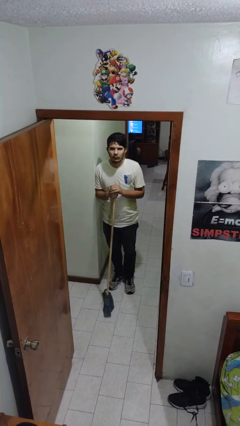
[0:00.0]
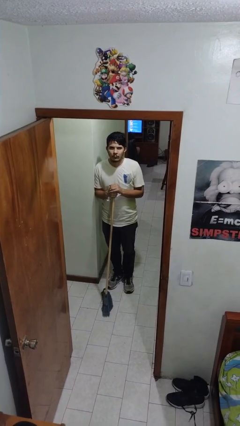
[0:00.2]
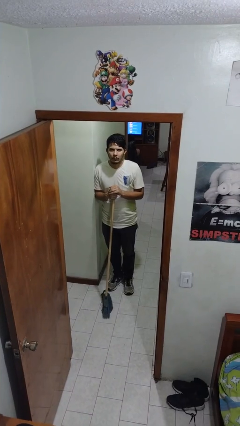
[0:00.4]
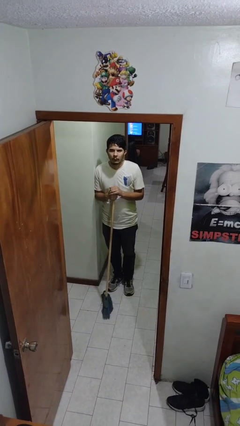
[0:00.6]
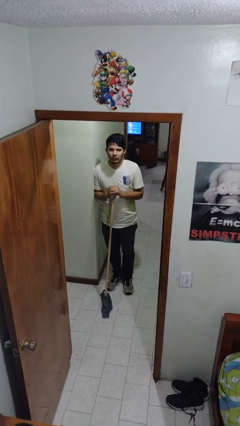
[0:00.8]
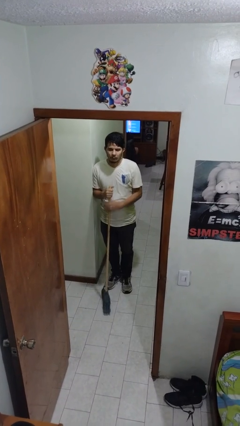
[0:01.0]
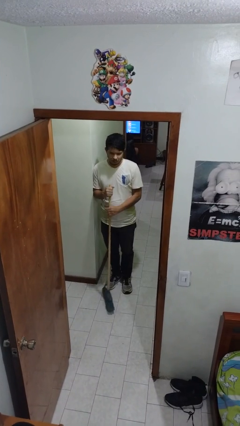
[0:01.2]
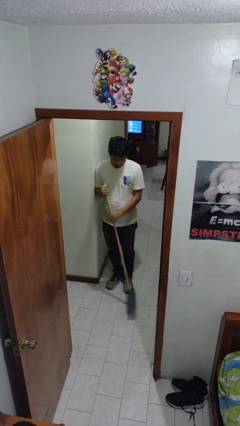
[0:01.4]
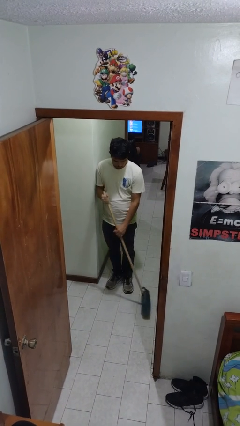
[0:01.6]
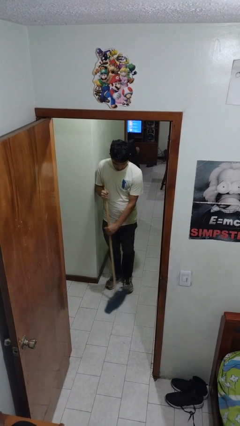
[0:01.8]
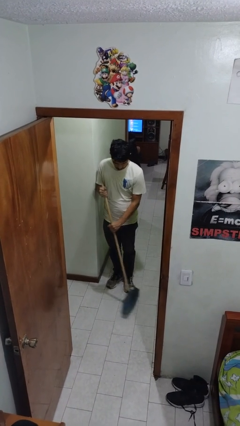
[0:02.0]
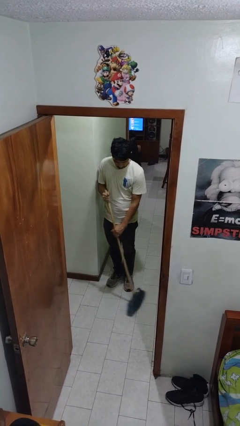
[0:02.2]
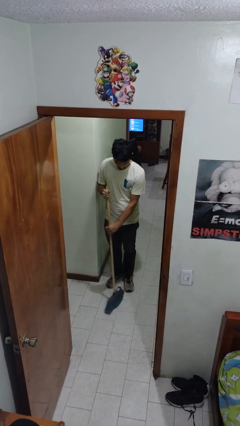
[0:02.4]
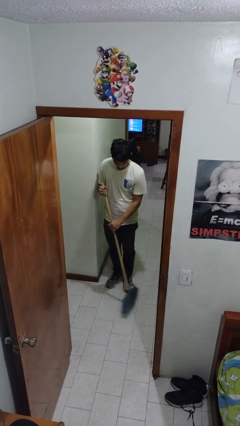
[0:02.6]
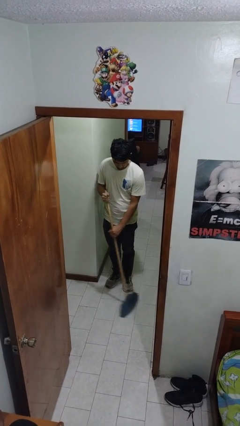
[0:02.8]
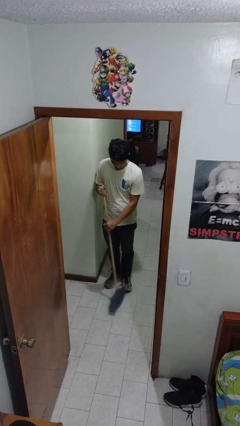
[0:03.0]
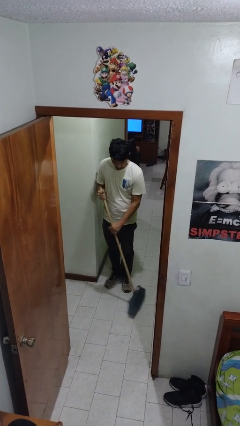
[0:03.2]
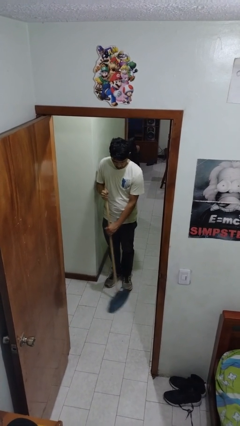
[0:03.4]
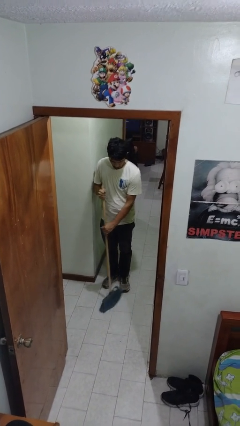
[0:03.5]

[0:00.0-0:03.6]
person sweeps floor

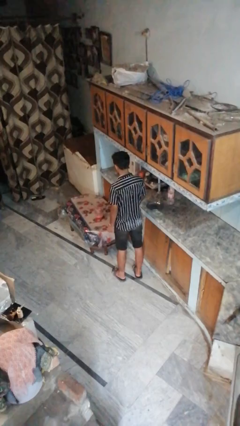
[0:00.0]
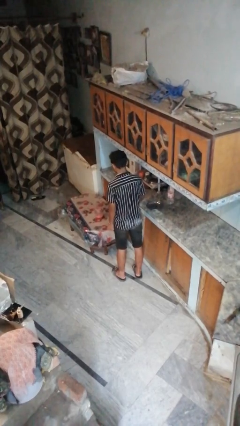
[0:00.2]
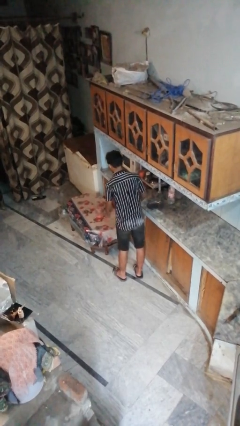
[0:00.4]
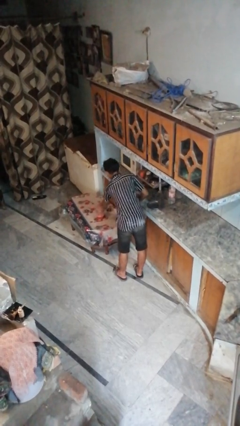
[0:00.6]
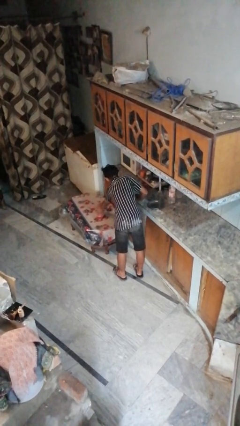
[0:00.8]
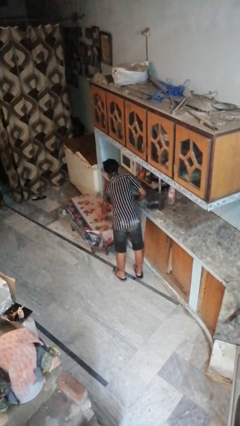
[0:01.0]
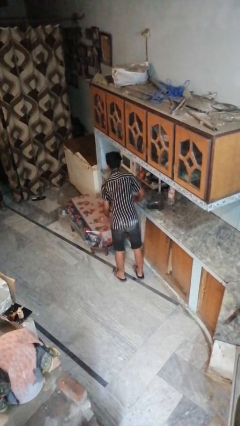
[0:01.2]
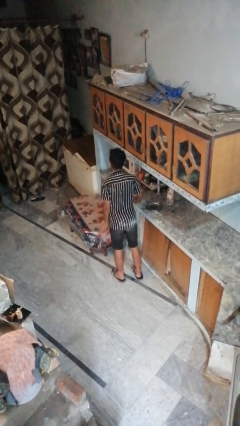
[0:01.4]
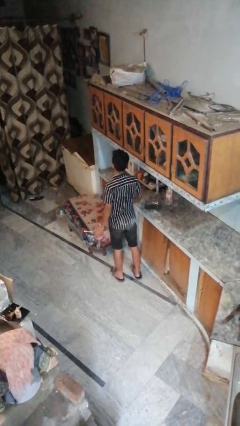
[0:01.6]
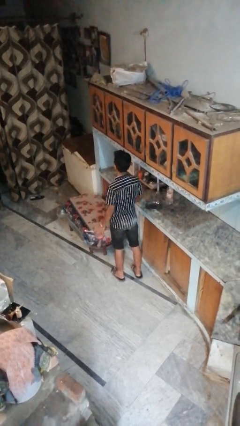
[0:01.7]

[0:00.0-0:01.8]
person picks up object from table

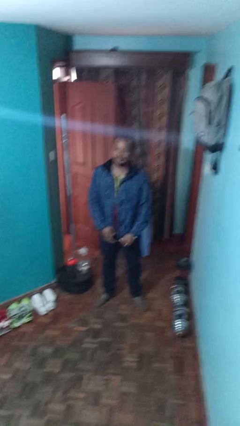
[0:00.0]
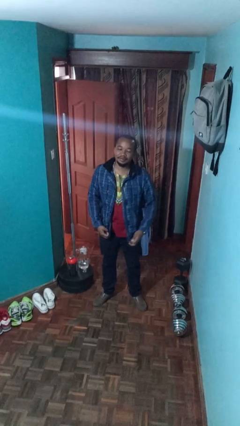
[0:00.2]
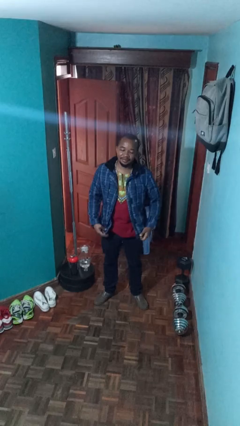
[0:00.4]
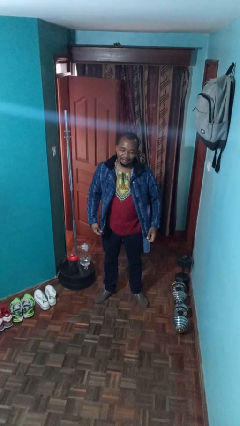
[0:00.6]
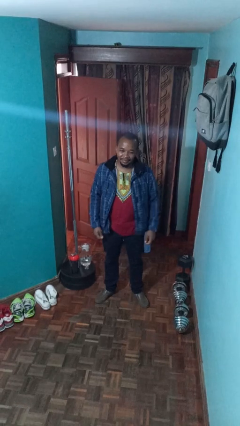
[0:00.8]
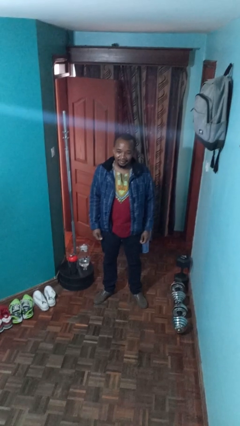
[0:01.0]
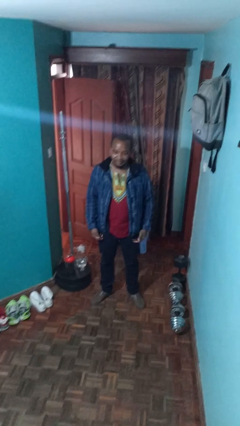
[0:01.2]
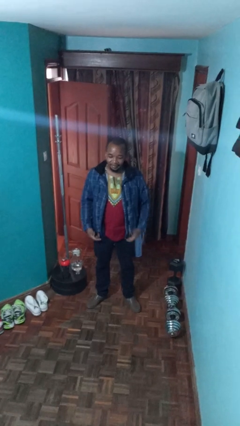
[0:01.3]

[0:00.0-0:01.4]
person unzips jacket

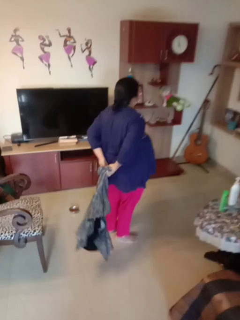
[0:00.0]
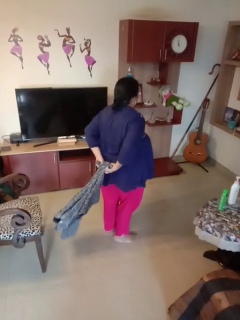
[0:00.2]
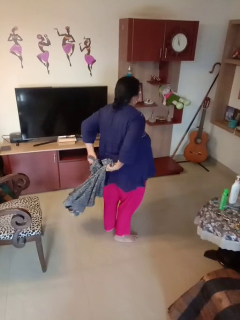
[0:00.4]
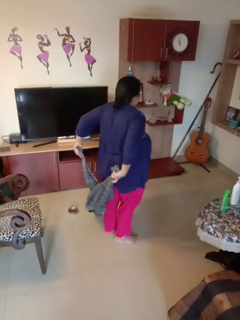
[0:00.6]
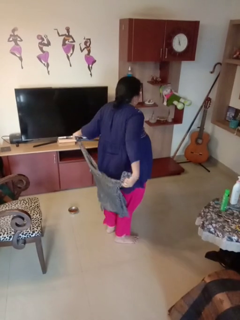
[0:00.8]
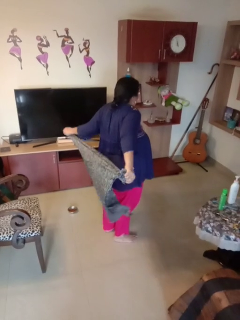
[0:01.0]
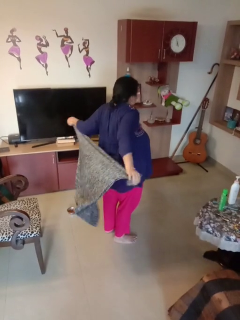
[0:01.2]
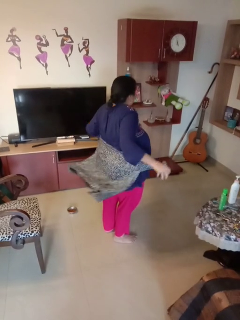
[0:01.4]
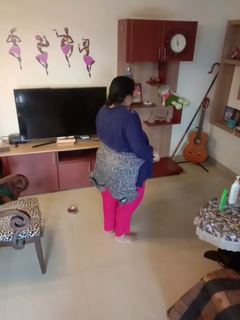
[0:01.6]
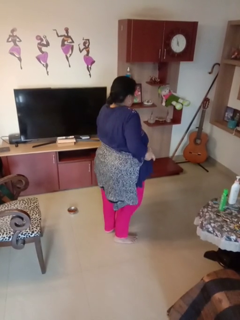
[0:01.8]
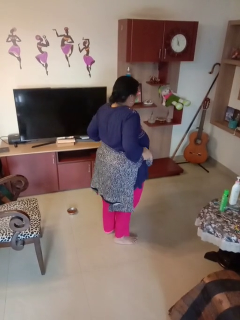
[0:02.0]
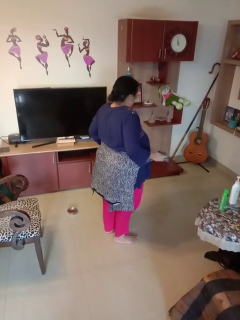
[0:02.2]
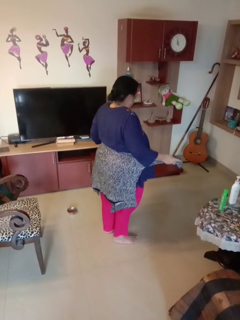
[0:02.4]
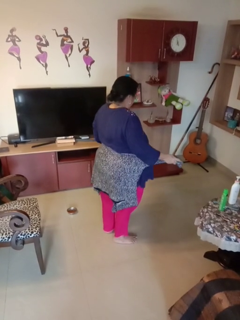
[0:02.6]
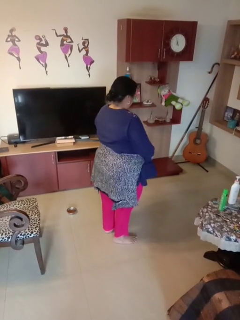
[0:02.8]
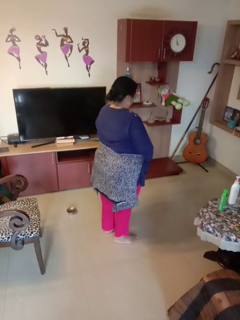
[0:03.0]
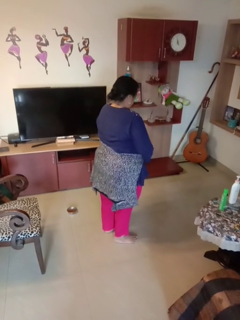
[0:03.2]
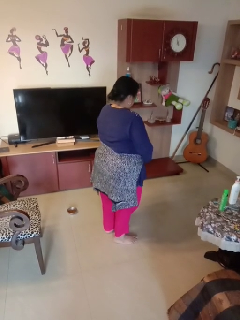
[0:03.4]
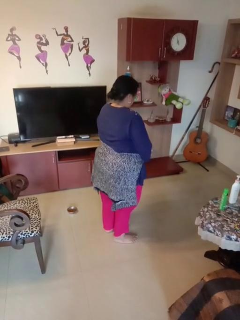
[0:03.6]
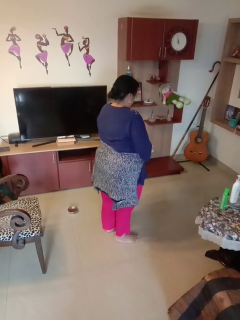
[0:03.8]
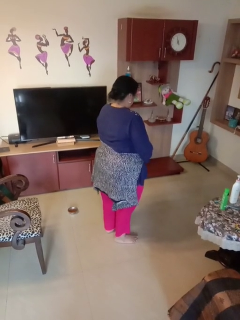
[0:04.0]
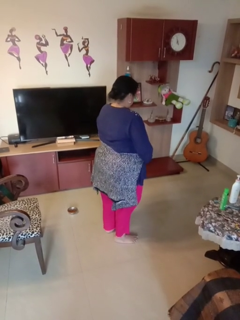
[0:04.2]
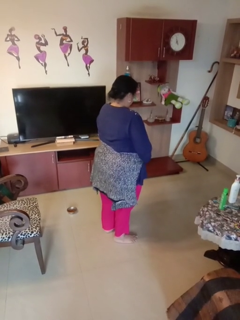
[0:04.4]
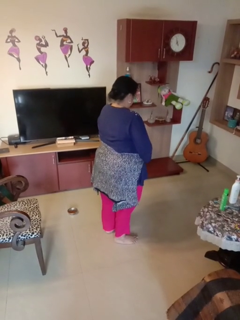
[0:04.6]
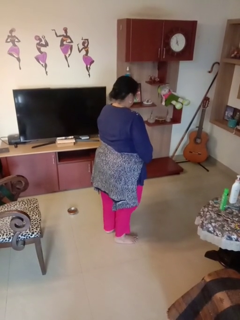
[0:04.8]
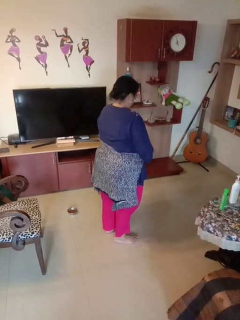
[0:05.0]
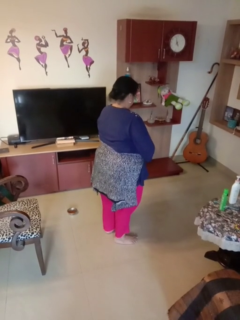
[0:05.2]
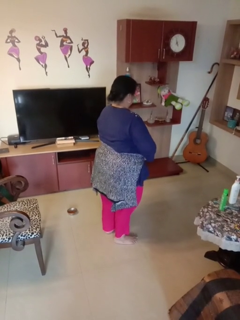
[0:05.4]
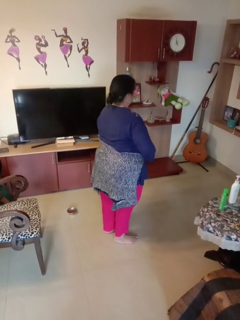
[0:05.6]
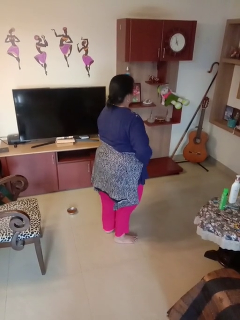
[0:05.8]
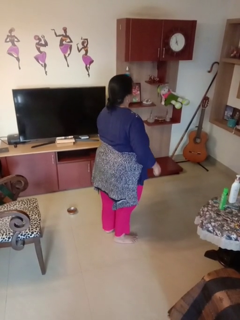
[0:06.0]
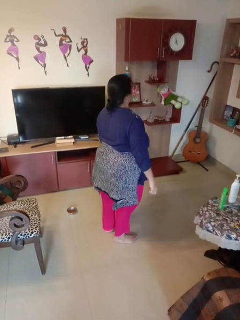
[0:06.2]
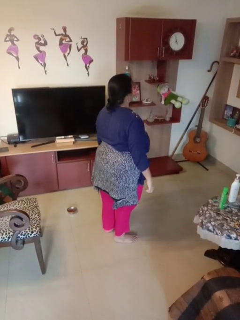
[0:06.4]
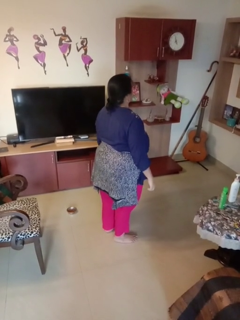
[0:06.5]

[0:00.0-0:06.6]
person ties jacket around waist

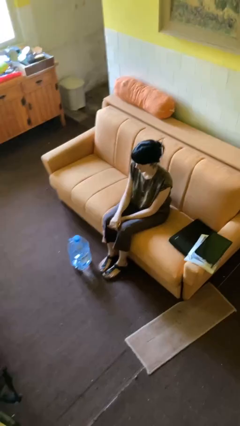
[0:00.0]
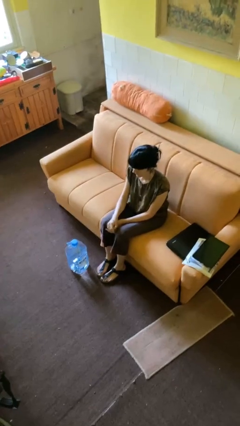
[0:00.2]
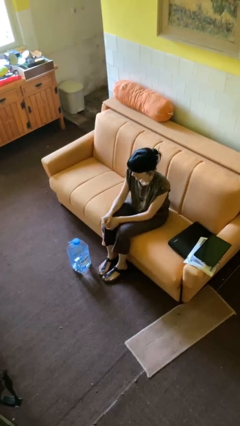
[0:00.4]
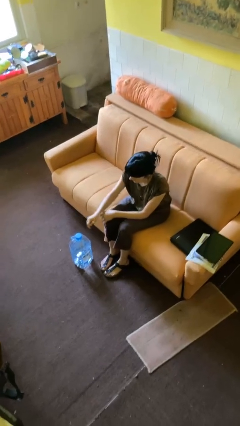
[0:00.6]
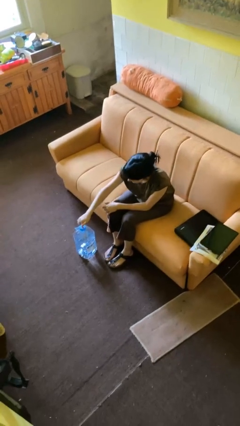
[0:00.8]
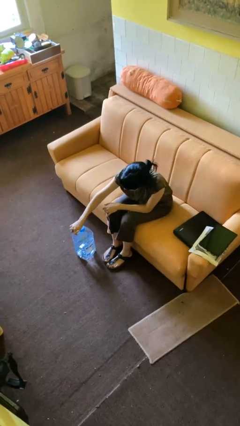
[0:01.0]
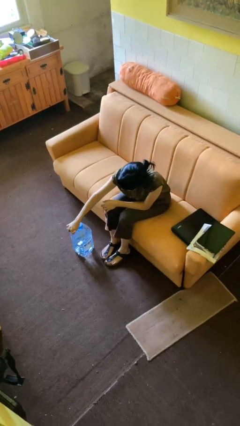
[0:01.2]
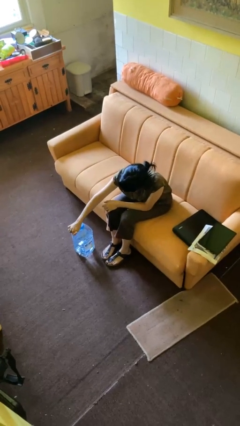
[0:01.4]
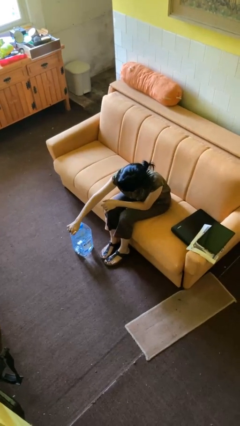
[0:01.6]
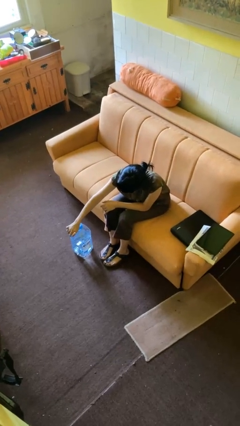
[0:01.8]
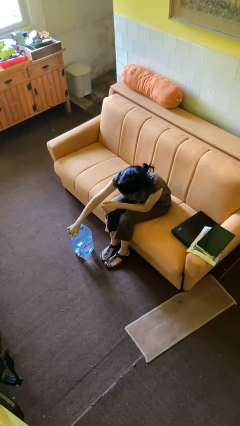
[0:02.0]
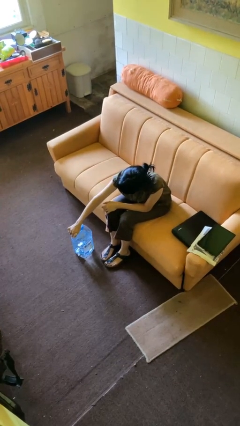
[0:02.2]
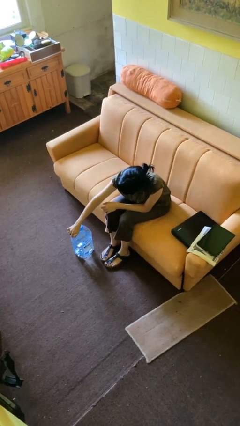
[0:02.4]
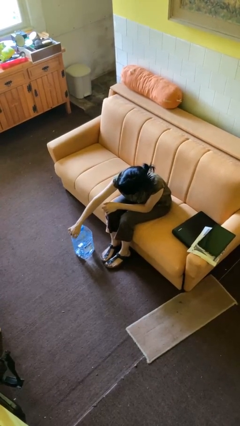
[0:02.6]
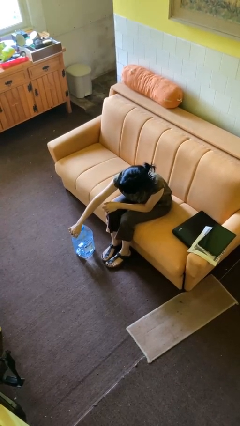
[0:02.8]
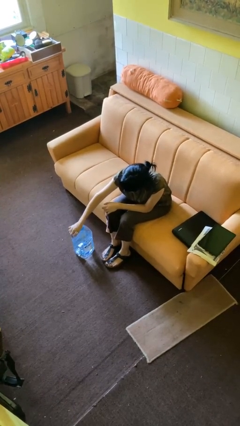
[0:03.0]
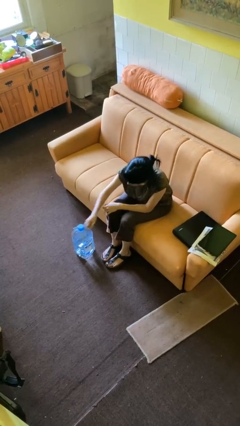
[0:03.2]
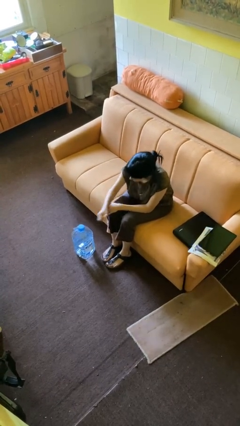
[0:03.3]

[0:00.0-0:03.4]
person taps object with finger

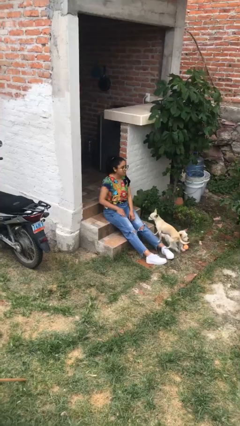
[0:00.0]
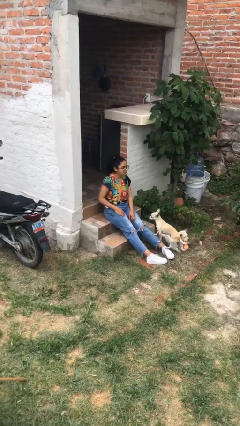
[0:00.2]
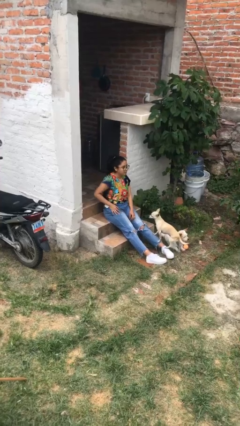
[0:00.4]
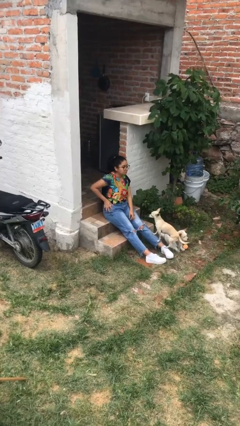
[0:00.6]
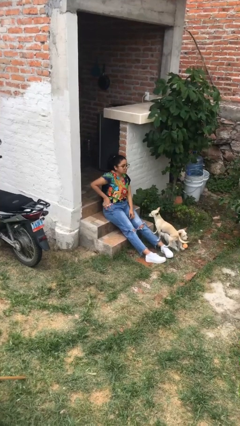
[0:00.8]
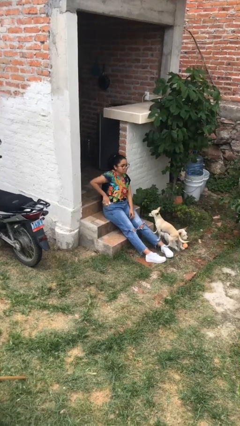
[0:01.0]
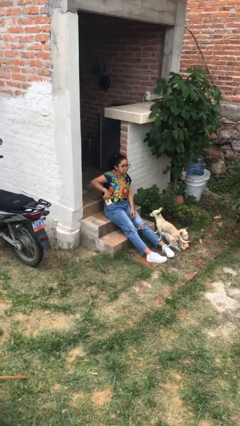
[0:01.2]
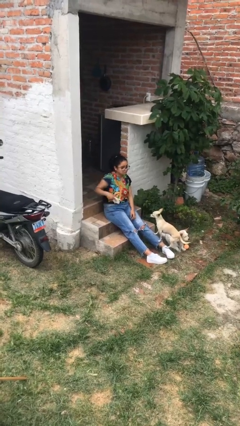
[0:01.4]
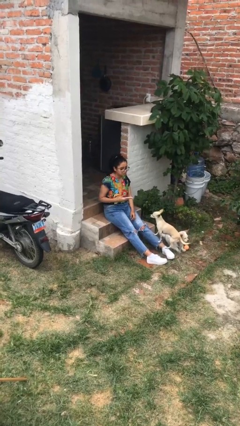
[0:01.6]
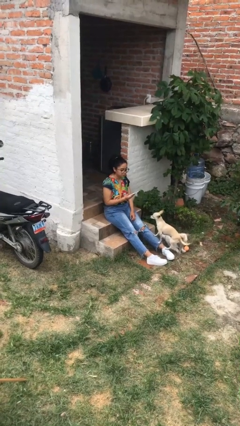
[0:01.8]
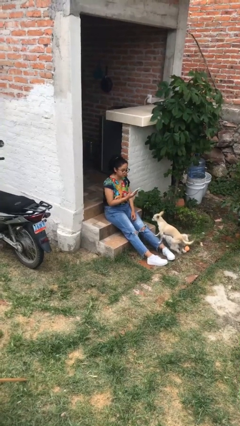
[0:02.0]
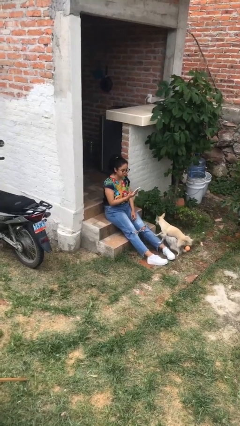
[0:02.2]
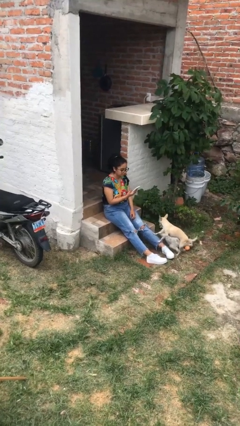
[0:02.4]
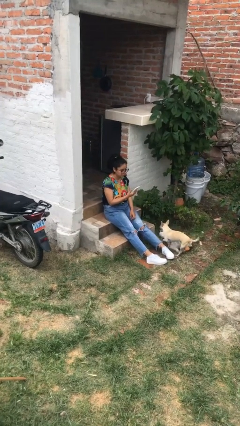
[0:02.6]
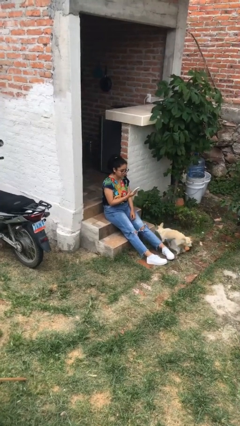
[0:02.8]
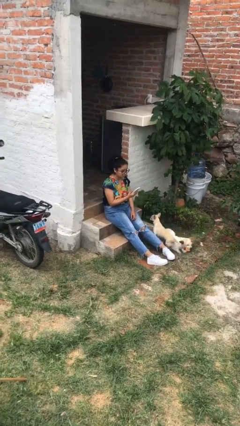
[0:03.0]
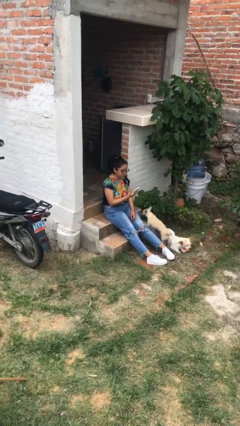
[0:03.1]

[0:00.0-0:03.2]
person takes phone from pocket
